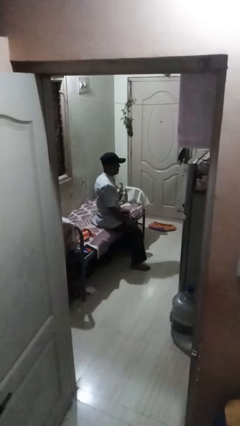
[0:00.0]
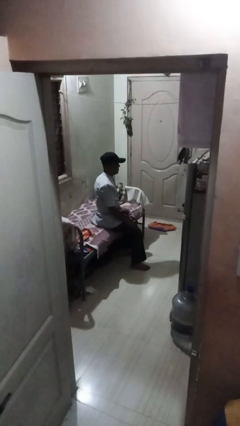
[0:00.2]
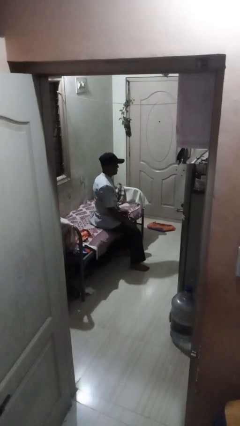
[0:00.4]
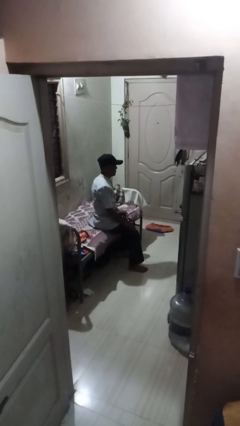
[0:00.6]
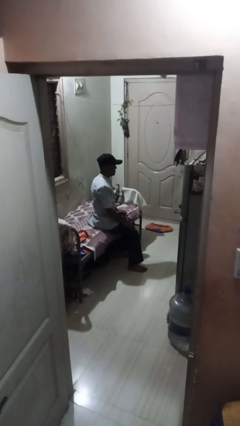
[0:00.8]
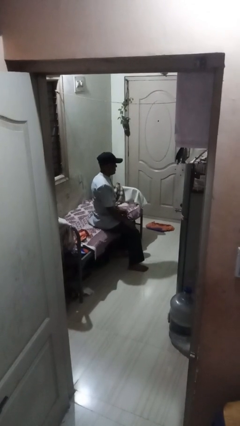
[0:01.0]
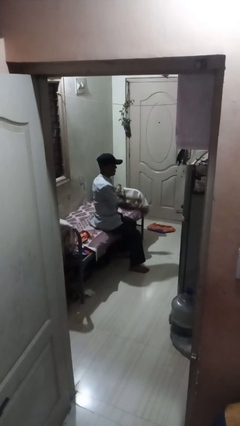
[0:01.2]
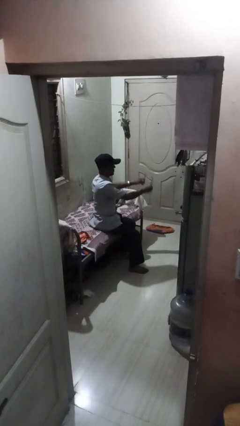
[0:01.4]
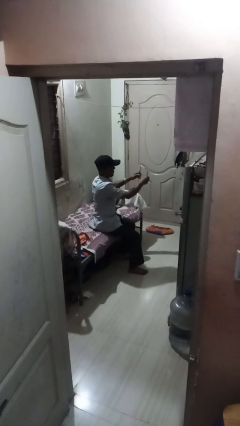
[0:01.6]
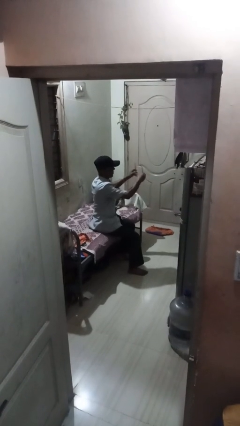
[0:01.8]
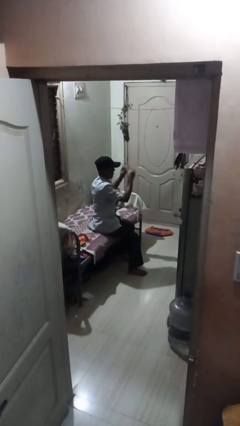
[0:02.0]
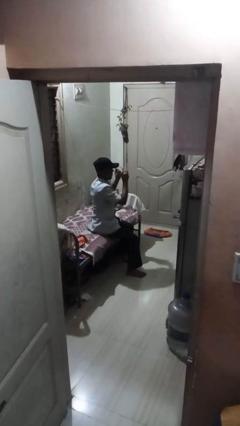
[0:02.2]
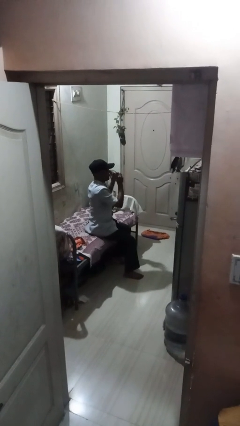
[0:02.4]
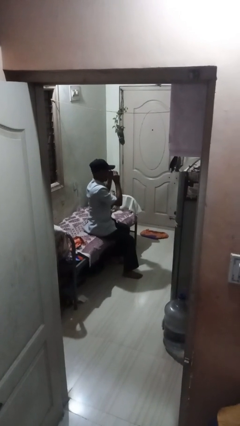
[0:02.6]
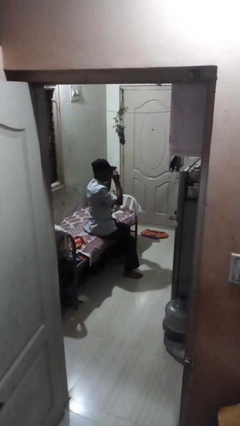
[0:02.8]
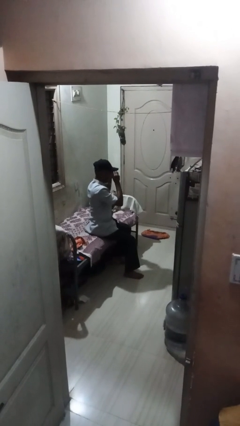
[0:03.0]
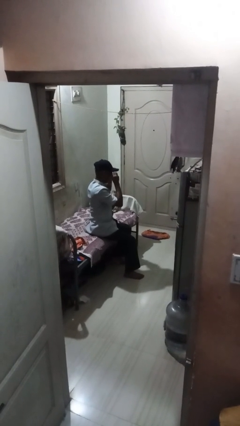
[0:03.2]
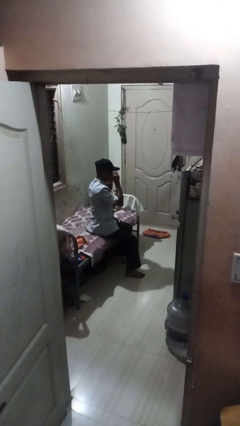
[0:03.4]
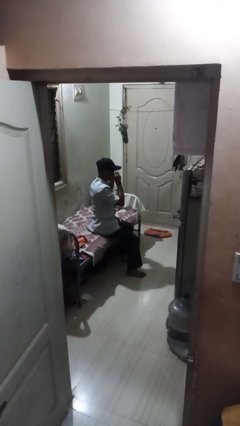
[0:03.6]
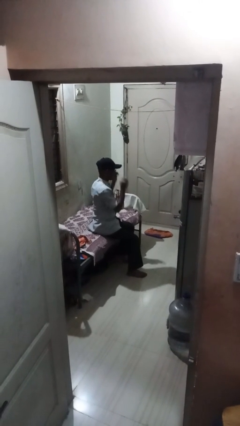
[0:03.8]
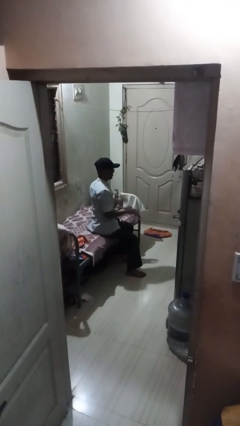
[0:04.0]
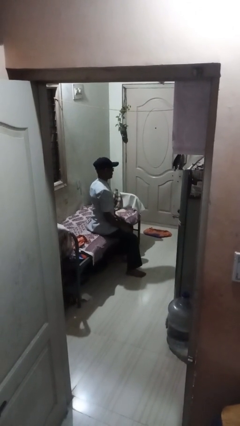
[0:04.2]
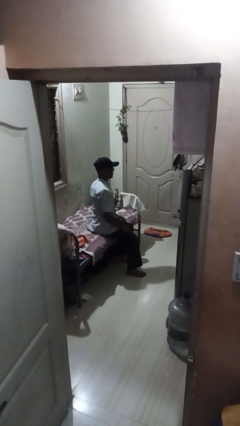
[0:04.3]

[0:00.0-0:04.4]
person puts on glasses

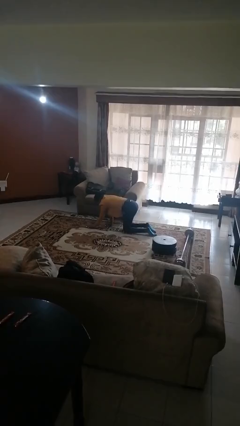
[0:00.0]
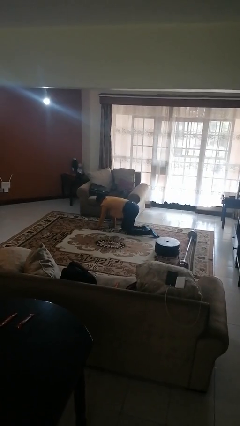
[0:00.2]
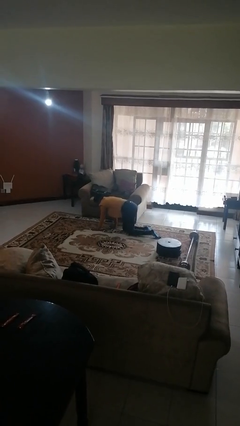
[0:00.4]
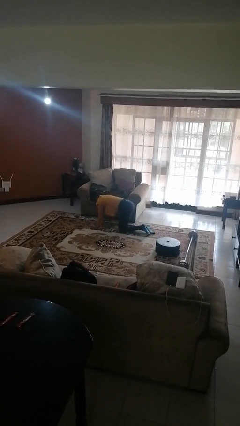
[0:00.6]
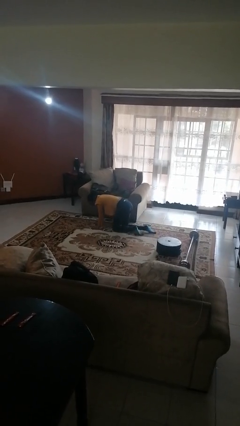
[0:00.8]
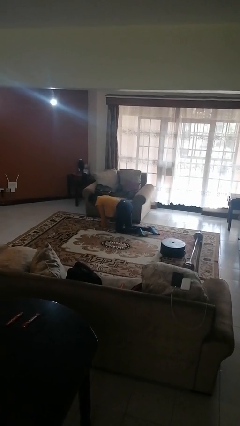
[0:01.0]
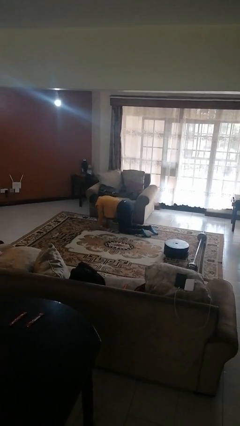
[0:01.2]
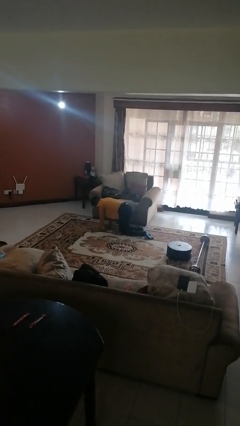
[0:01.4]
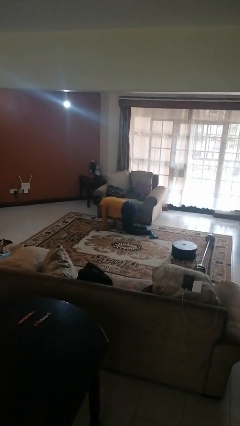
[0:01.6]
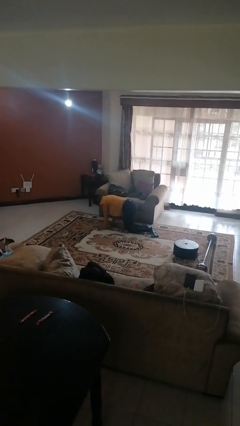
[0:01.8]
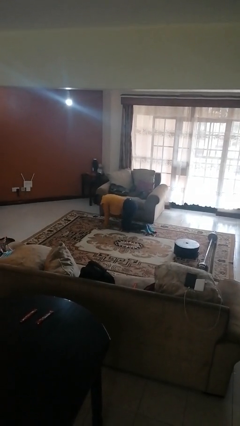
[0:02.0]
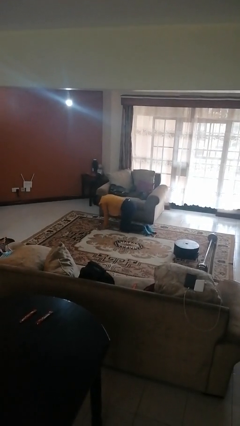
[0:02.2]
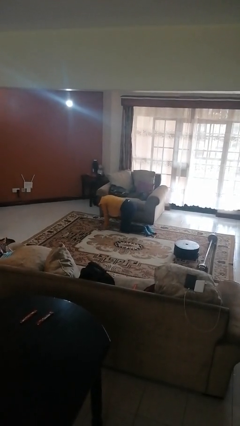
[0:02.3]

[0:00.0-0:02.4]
person crawls

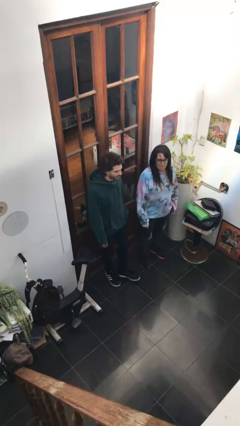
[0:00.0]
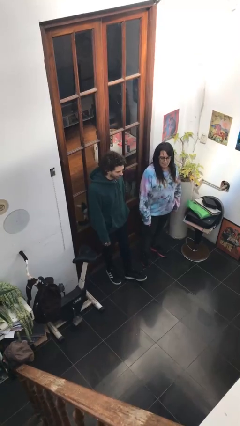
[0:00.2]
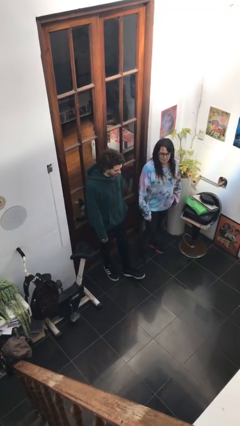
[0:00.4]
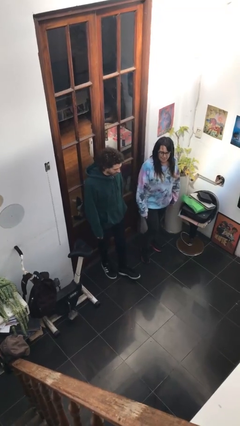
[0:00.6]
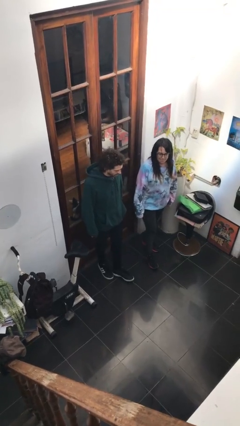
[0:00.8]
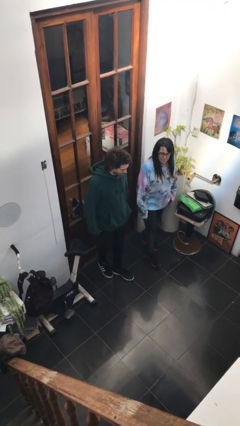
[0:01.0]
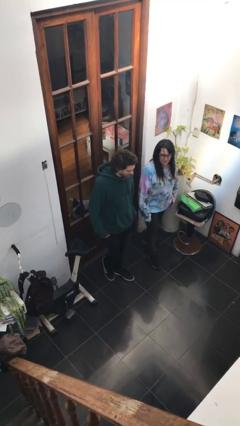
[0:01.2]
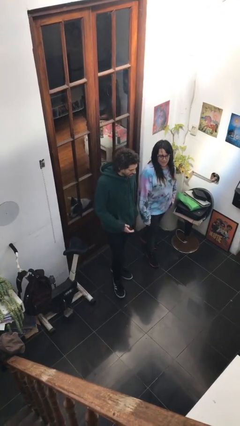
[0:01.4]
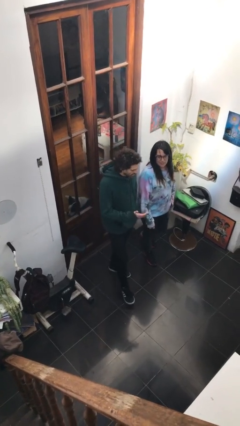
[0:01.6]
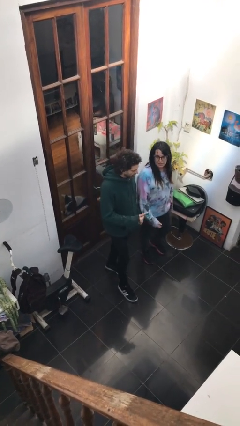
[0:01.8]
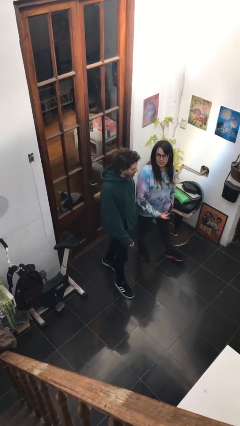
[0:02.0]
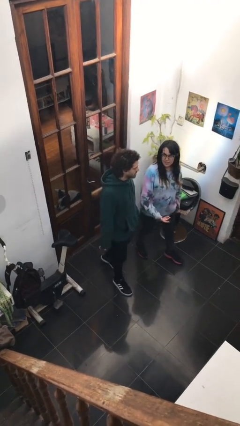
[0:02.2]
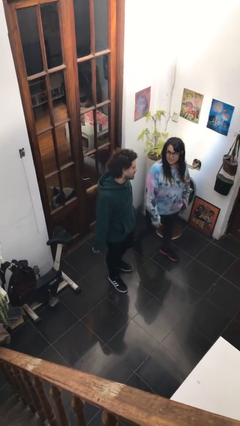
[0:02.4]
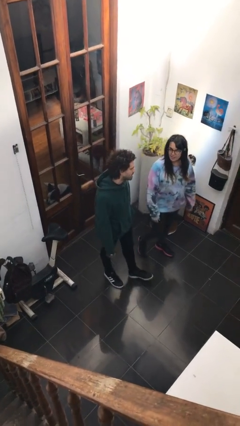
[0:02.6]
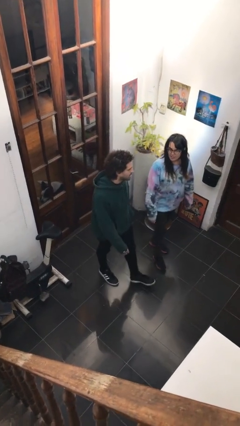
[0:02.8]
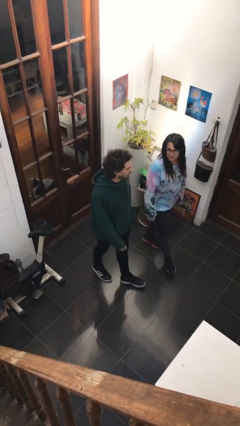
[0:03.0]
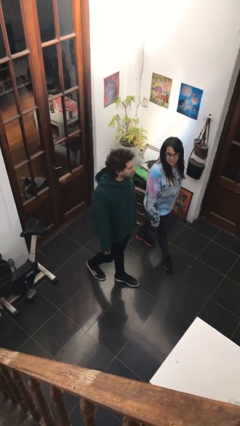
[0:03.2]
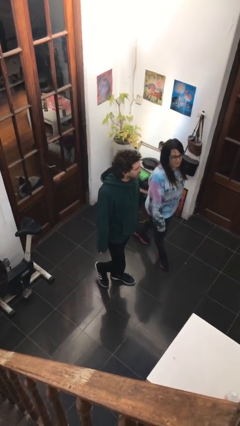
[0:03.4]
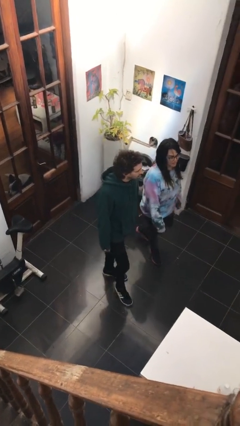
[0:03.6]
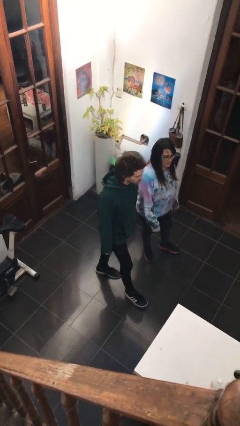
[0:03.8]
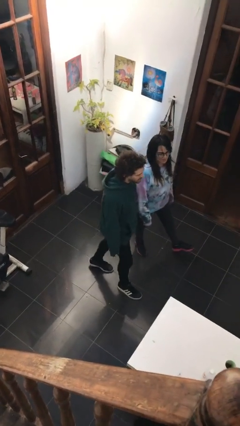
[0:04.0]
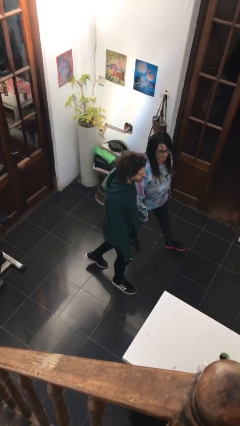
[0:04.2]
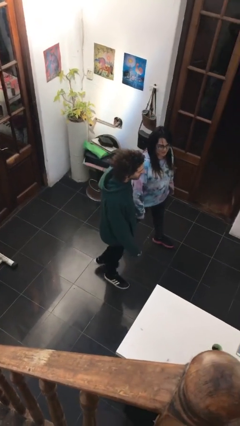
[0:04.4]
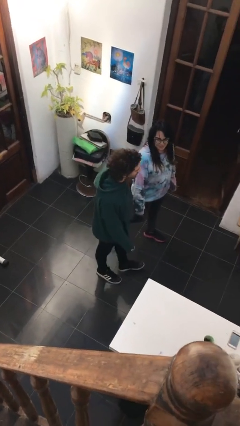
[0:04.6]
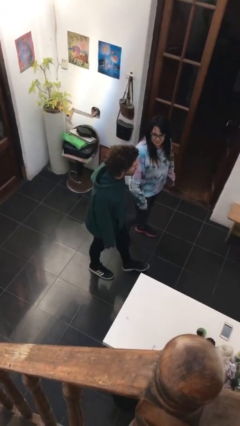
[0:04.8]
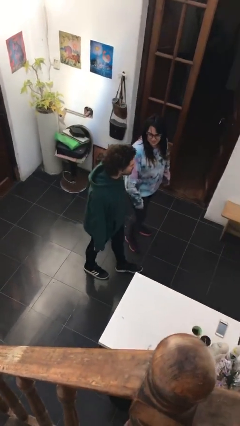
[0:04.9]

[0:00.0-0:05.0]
person talks to person

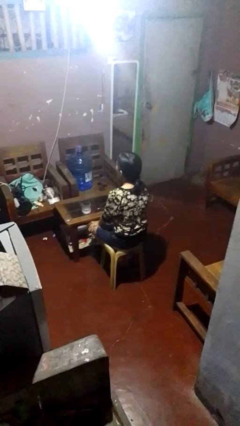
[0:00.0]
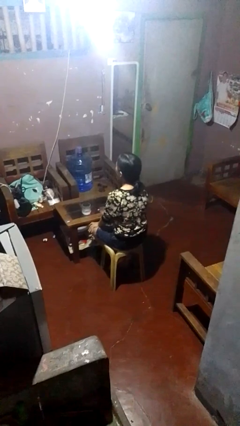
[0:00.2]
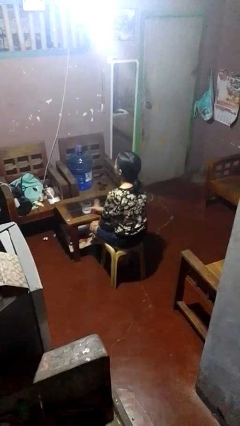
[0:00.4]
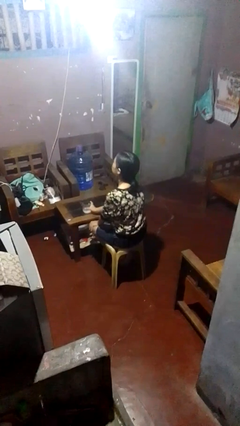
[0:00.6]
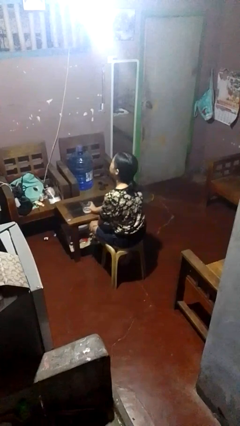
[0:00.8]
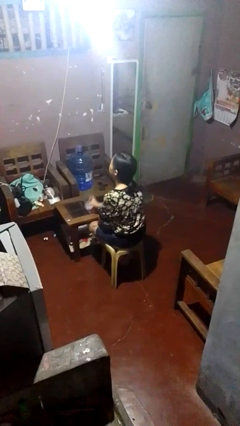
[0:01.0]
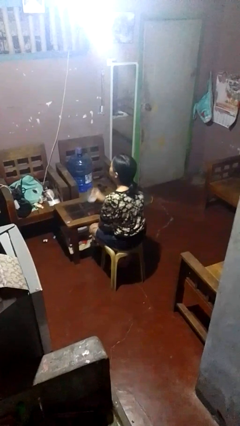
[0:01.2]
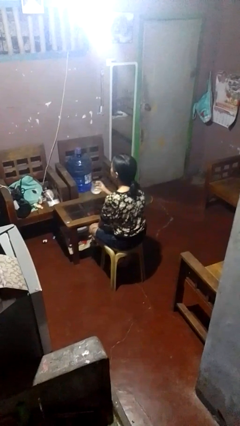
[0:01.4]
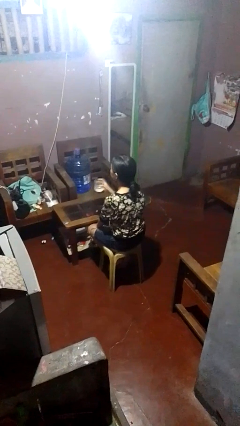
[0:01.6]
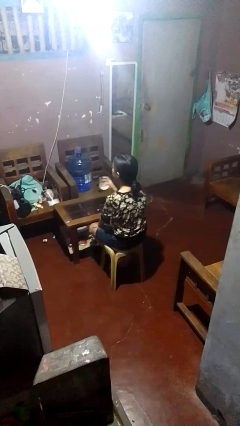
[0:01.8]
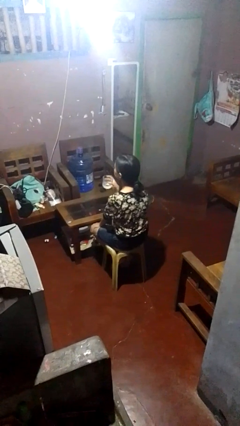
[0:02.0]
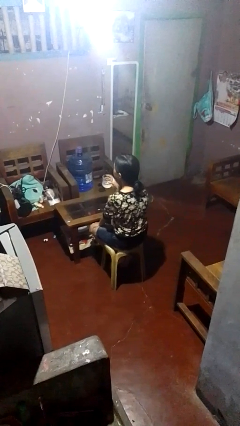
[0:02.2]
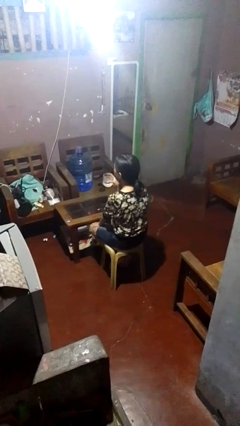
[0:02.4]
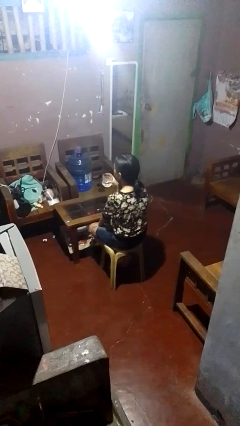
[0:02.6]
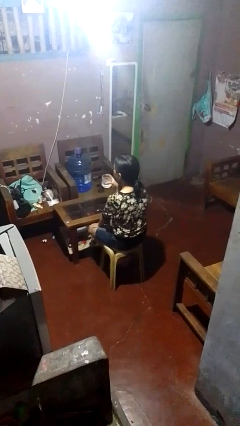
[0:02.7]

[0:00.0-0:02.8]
person picks up object from table

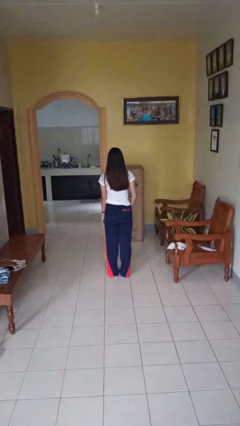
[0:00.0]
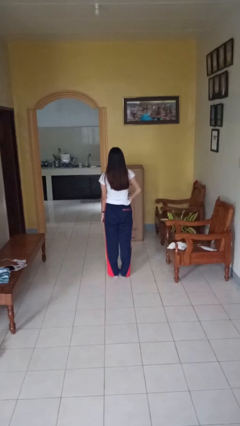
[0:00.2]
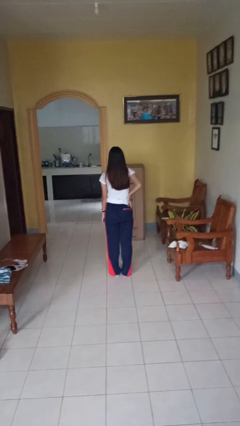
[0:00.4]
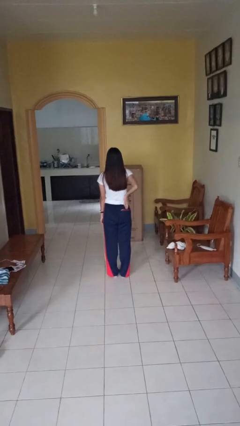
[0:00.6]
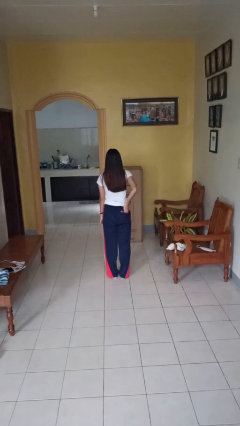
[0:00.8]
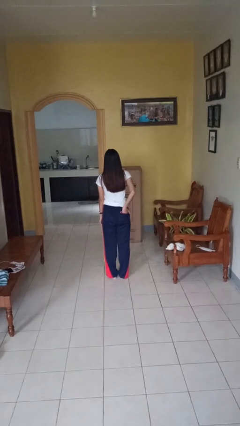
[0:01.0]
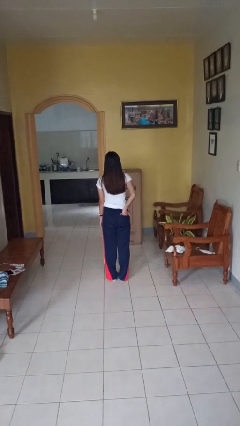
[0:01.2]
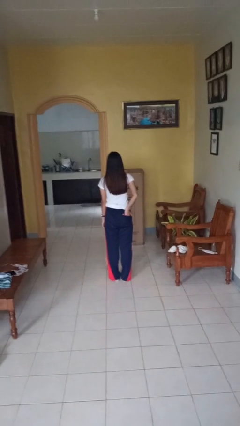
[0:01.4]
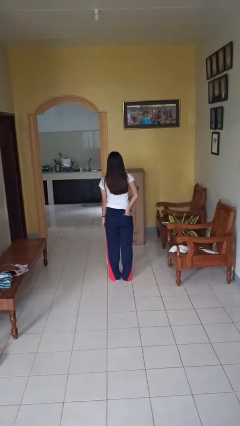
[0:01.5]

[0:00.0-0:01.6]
person puts hands in back pockets

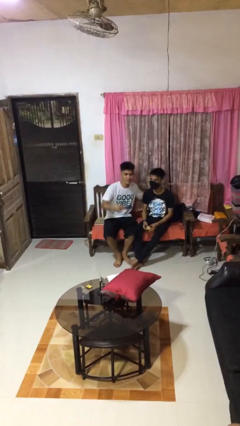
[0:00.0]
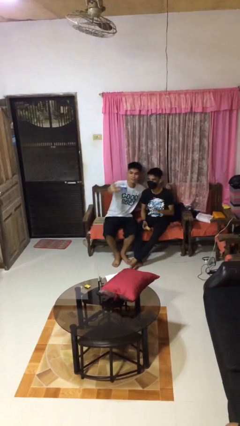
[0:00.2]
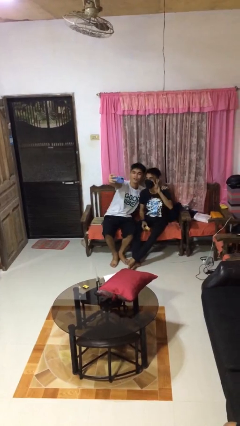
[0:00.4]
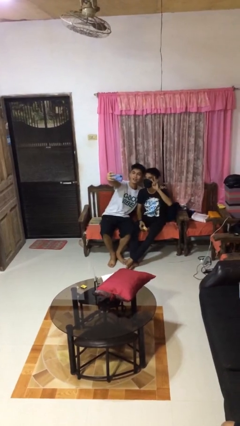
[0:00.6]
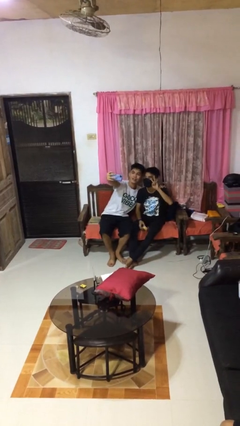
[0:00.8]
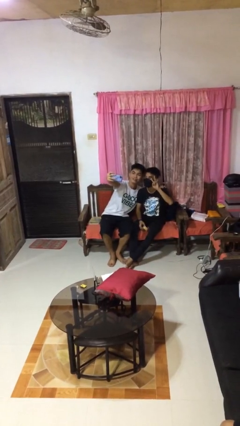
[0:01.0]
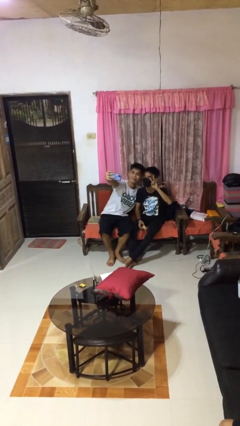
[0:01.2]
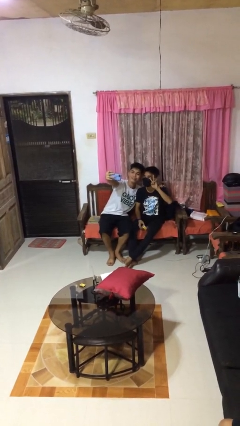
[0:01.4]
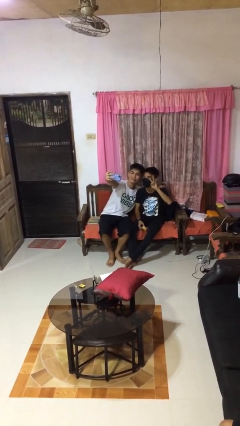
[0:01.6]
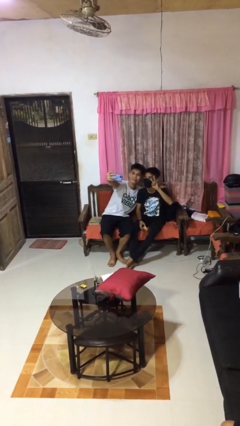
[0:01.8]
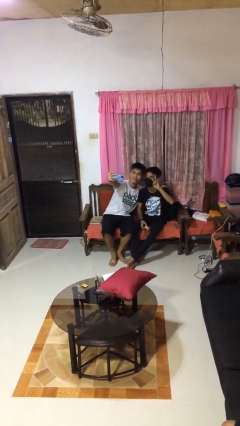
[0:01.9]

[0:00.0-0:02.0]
person takes selfie with person
